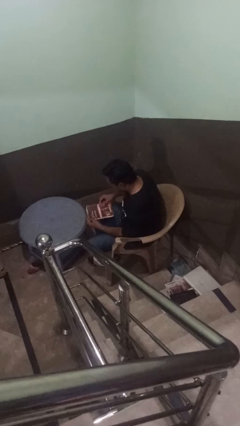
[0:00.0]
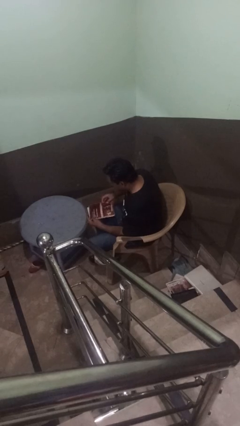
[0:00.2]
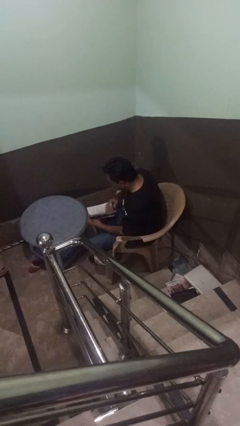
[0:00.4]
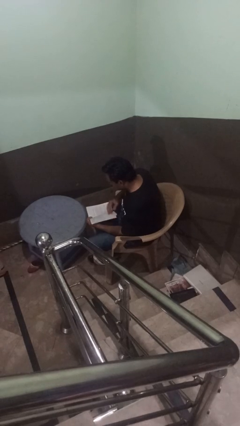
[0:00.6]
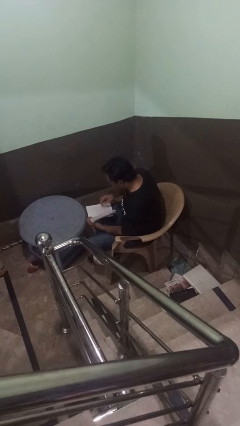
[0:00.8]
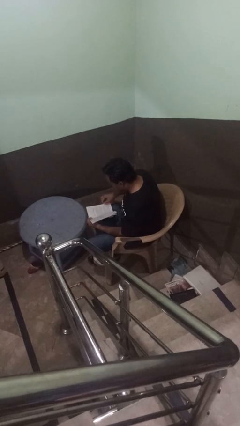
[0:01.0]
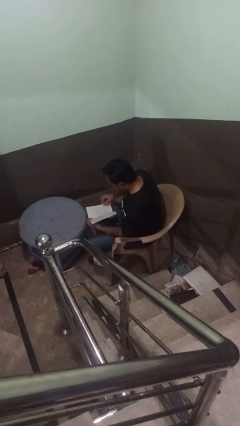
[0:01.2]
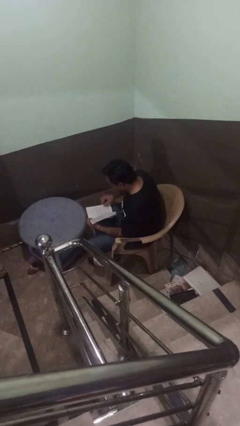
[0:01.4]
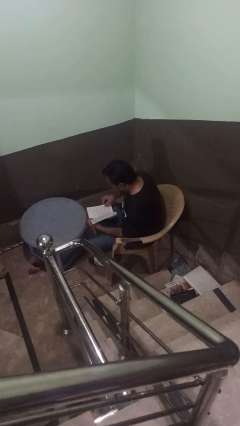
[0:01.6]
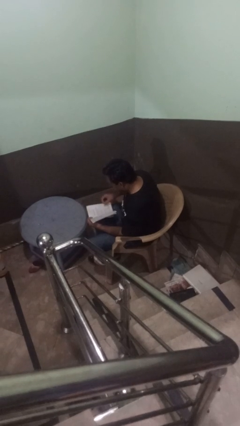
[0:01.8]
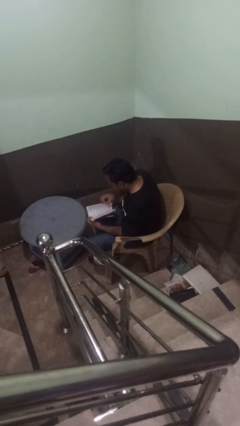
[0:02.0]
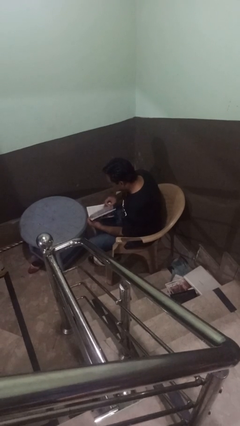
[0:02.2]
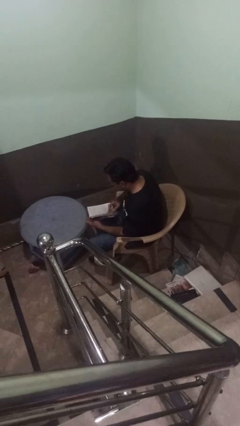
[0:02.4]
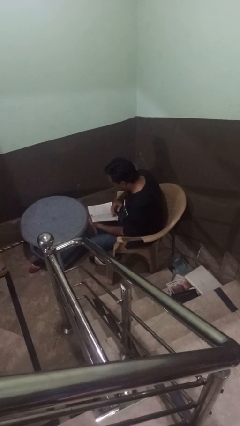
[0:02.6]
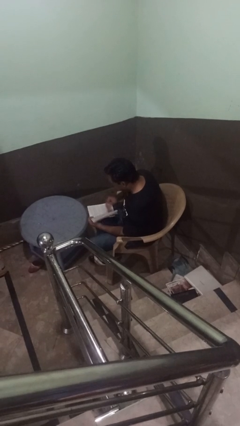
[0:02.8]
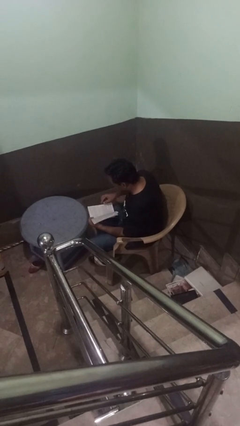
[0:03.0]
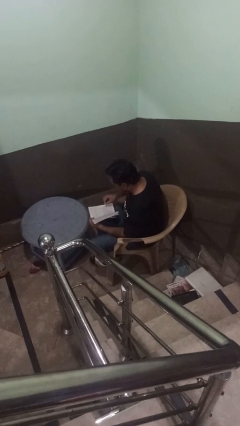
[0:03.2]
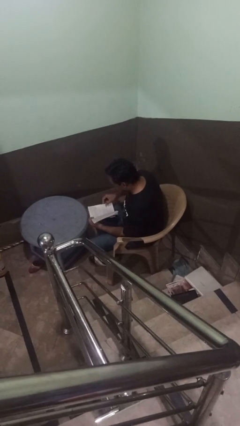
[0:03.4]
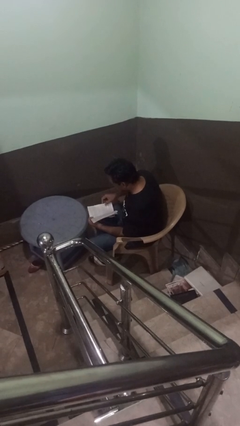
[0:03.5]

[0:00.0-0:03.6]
person reads book

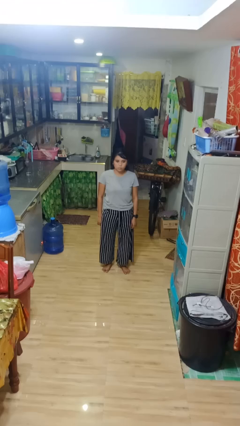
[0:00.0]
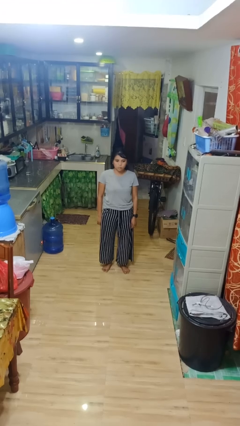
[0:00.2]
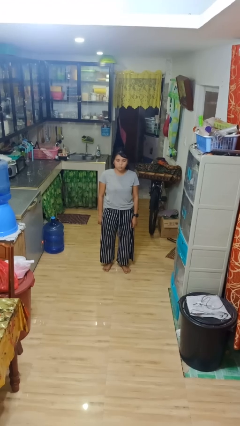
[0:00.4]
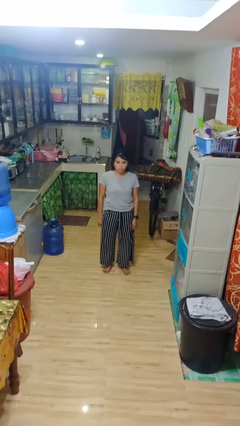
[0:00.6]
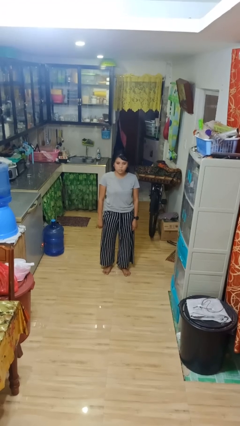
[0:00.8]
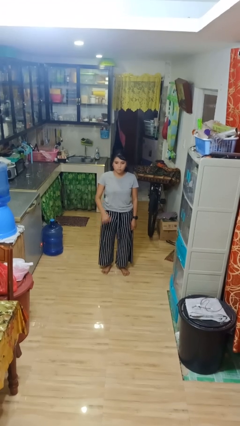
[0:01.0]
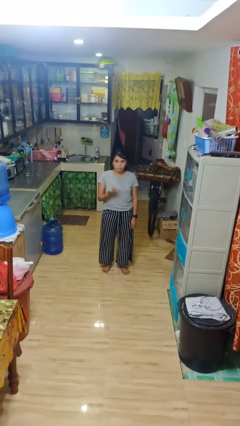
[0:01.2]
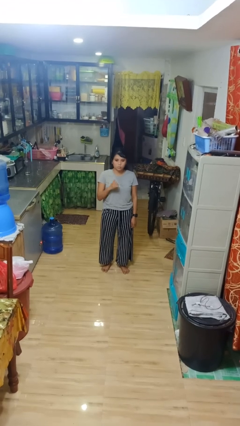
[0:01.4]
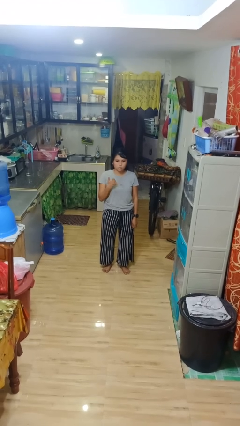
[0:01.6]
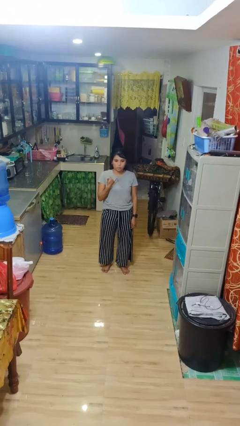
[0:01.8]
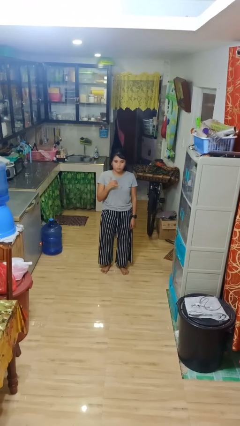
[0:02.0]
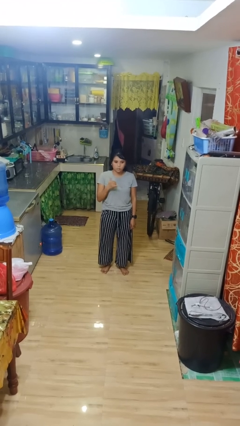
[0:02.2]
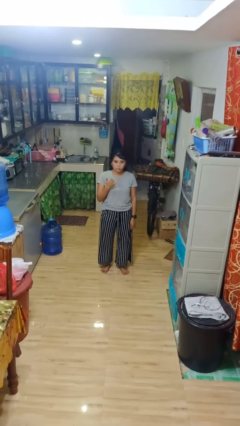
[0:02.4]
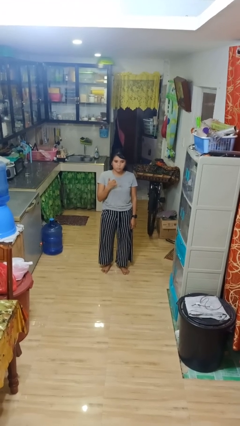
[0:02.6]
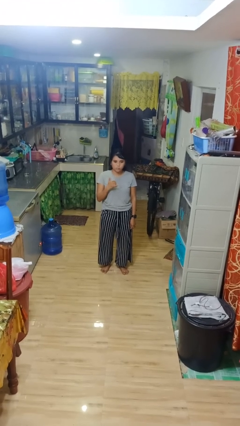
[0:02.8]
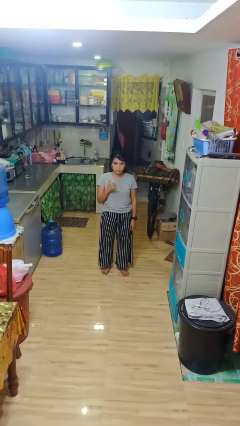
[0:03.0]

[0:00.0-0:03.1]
person gestures hang loose

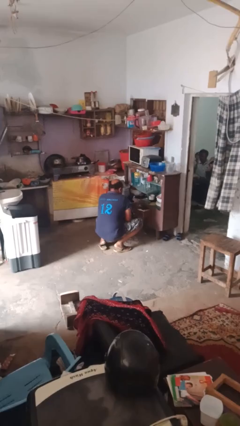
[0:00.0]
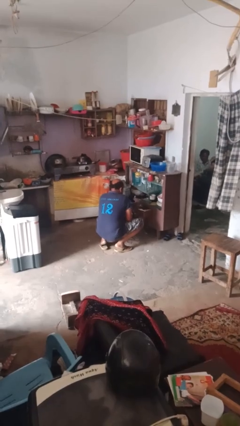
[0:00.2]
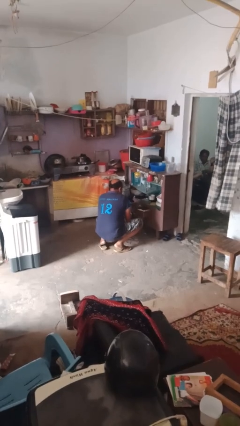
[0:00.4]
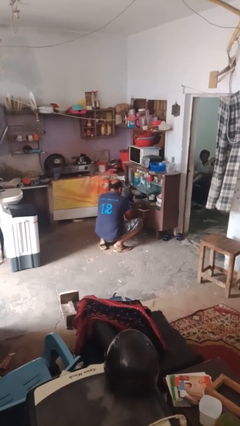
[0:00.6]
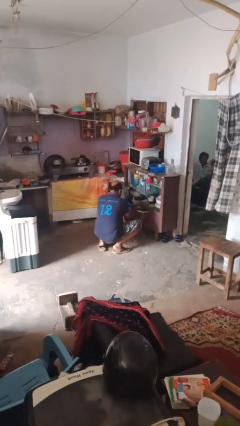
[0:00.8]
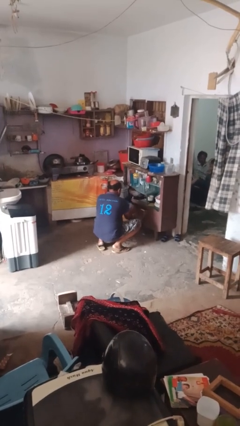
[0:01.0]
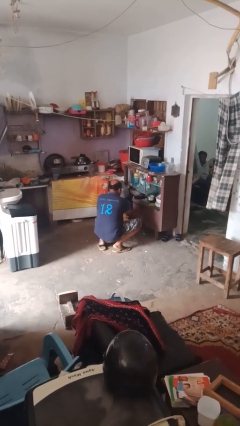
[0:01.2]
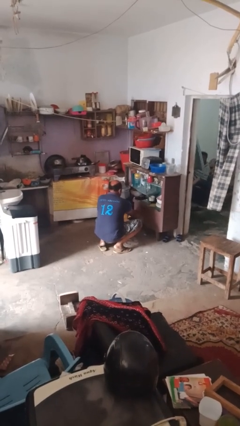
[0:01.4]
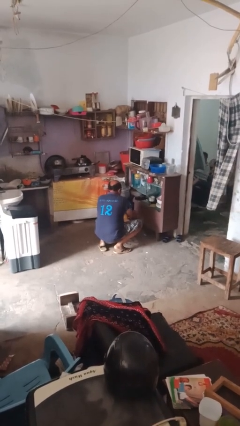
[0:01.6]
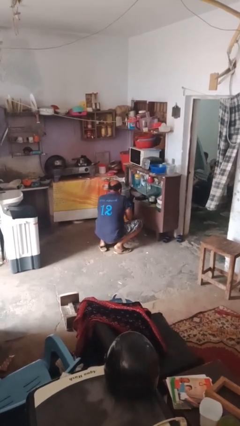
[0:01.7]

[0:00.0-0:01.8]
person closes kitchen drawer

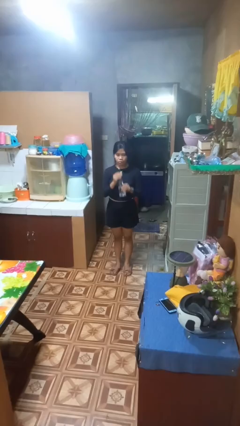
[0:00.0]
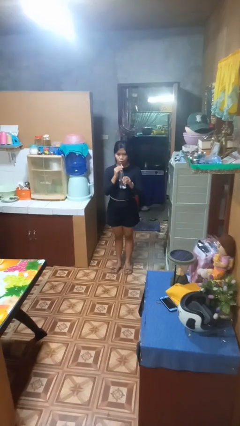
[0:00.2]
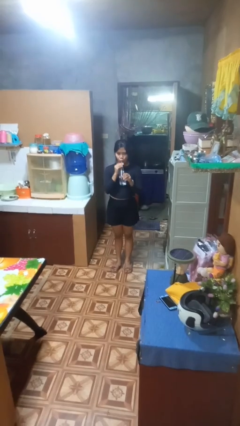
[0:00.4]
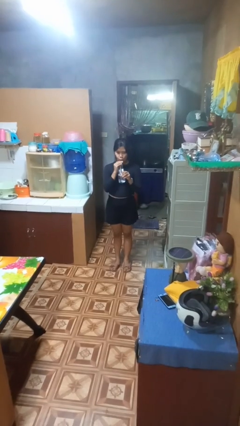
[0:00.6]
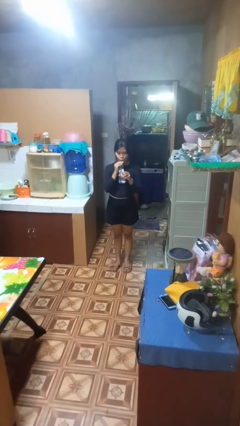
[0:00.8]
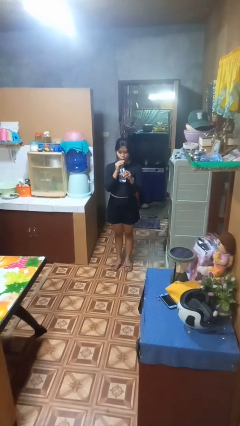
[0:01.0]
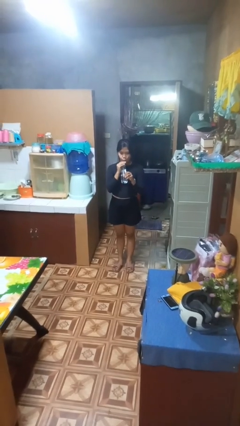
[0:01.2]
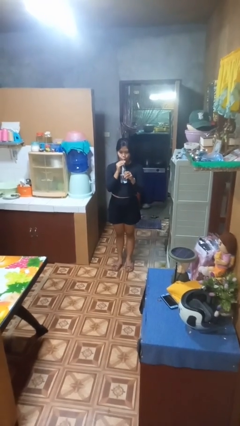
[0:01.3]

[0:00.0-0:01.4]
person drinks from straw

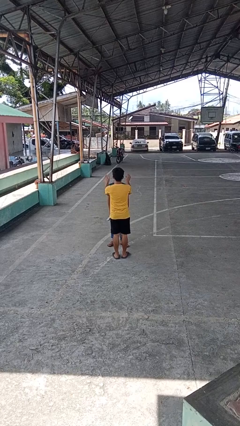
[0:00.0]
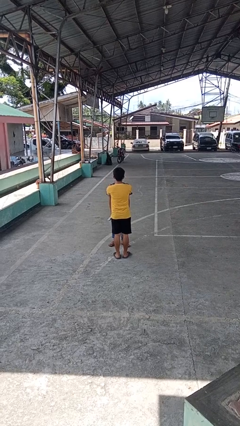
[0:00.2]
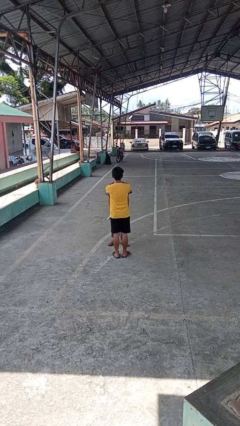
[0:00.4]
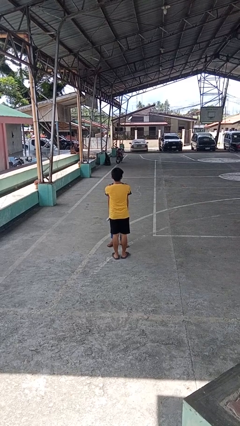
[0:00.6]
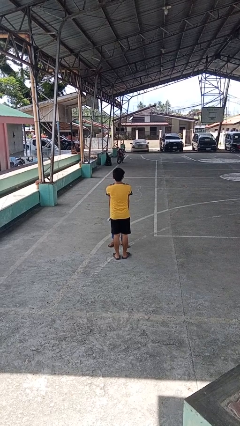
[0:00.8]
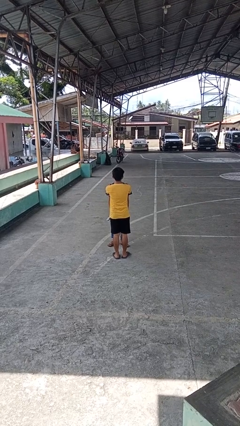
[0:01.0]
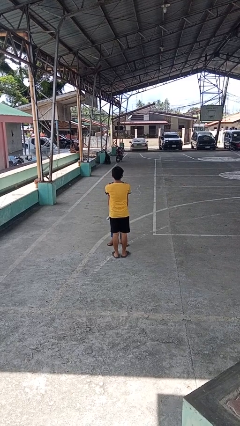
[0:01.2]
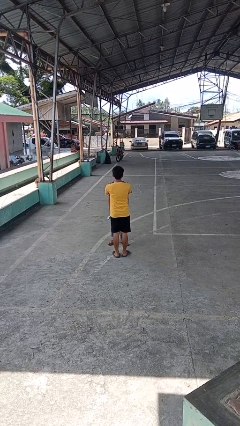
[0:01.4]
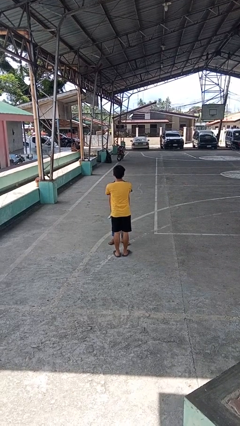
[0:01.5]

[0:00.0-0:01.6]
person grabs person by shoulder

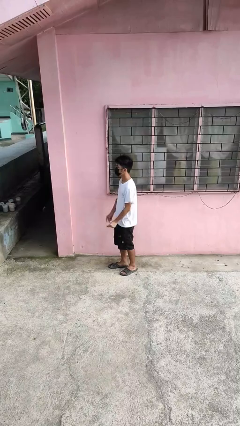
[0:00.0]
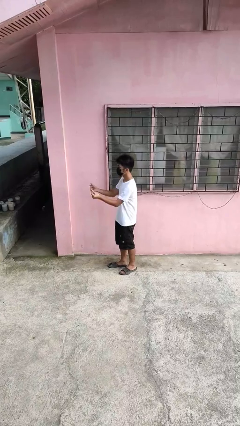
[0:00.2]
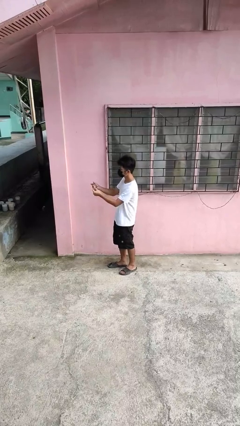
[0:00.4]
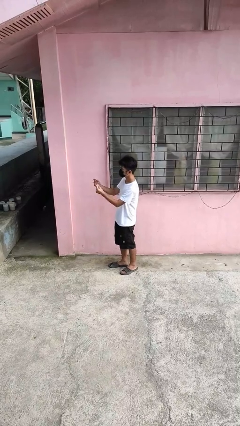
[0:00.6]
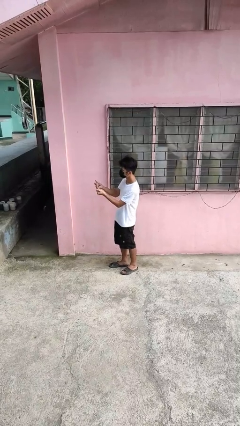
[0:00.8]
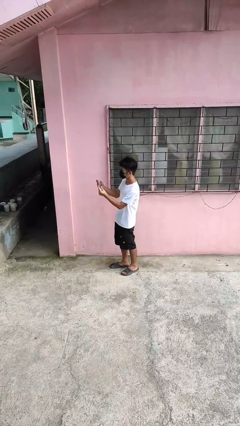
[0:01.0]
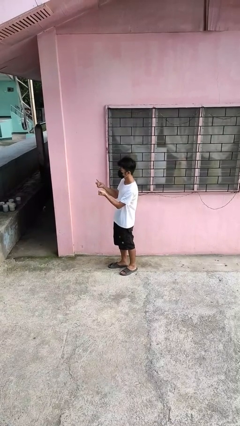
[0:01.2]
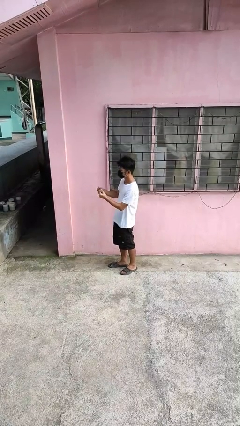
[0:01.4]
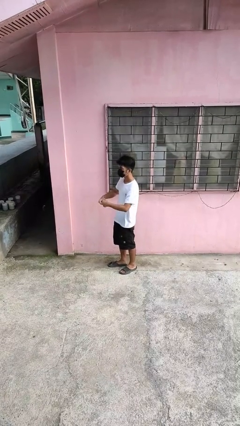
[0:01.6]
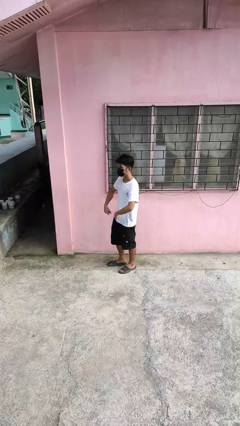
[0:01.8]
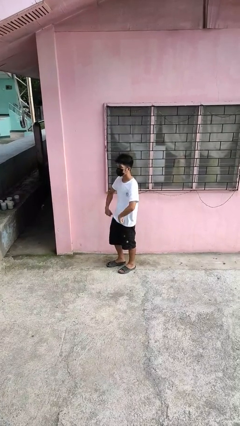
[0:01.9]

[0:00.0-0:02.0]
person snaps fingers

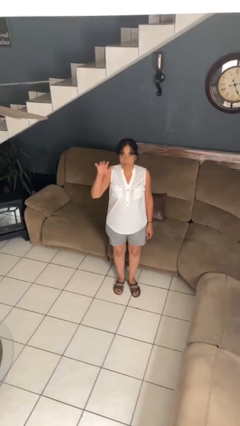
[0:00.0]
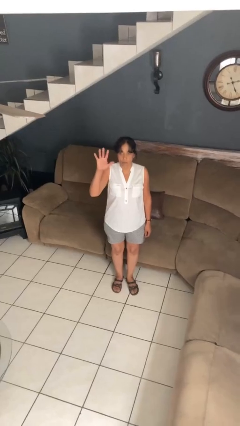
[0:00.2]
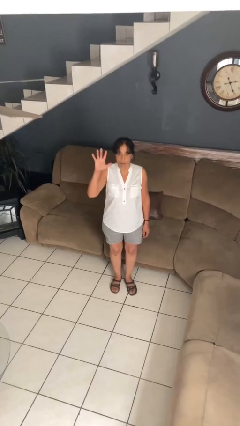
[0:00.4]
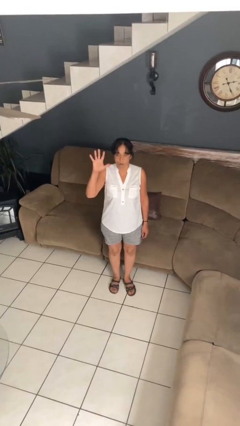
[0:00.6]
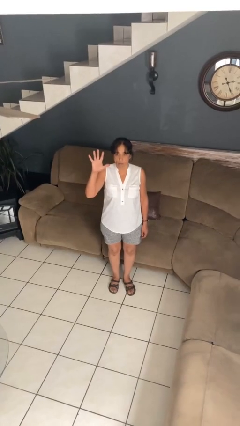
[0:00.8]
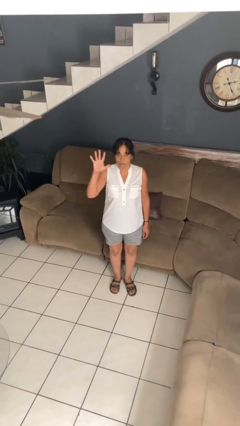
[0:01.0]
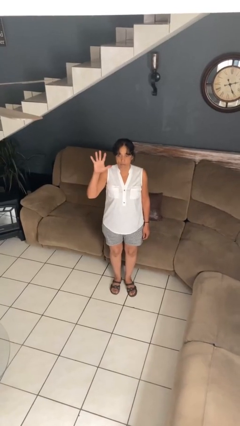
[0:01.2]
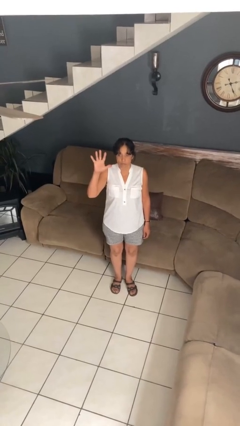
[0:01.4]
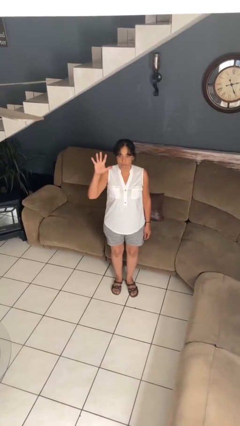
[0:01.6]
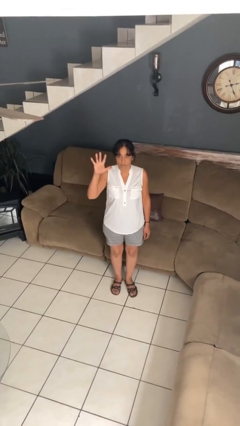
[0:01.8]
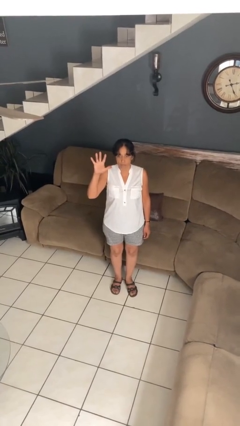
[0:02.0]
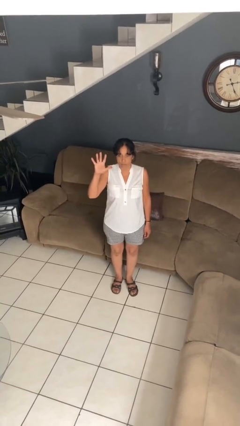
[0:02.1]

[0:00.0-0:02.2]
person gestures number five

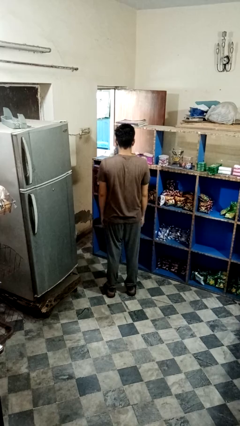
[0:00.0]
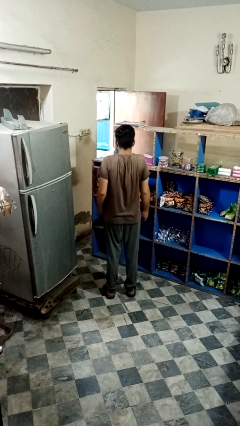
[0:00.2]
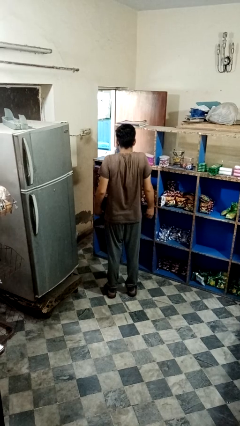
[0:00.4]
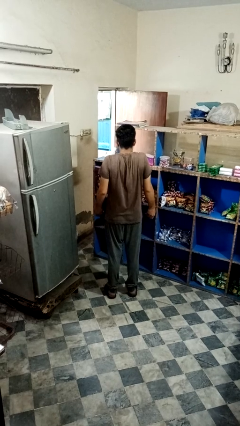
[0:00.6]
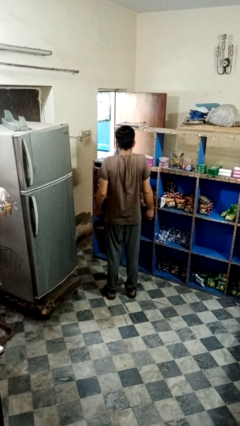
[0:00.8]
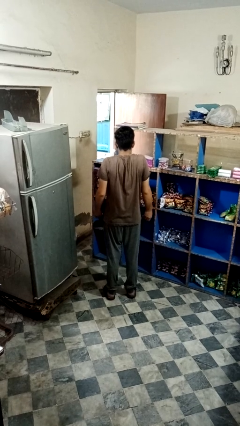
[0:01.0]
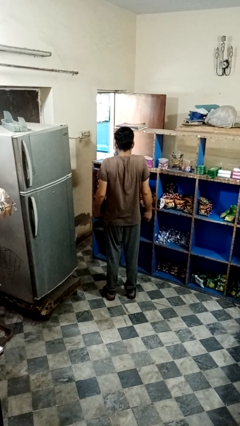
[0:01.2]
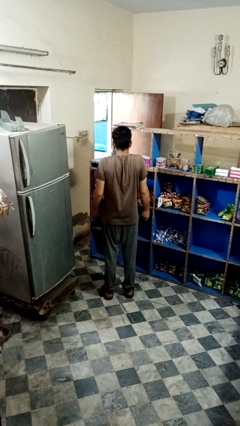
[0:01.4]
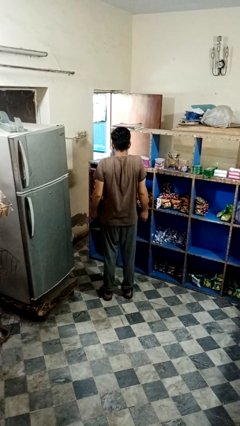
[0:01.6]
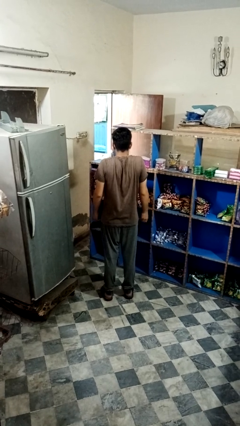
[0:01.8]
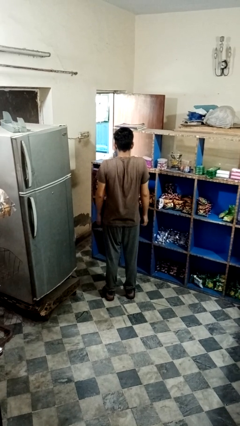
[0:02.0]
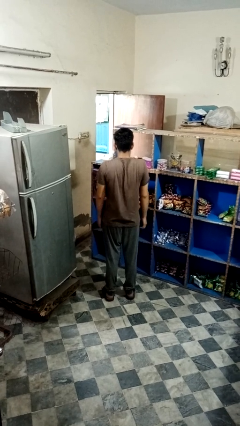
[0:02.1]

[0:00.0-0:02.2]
person shrugs
